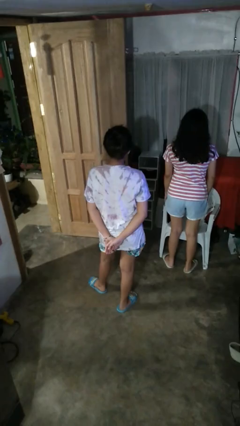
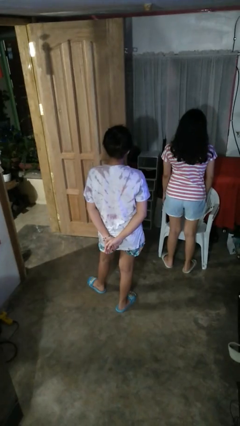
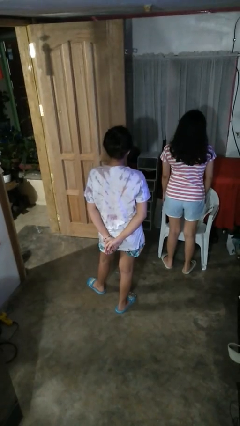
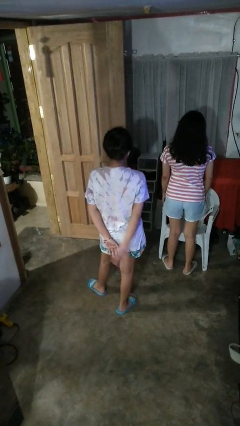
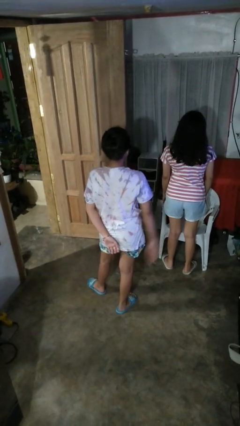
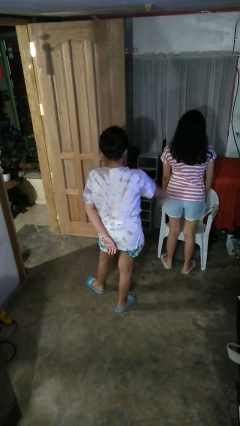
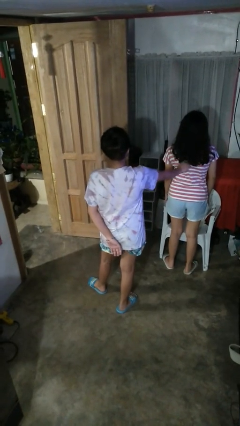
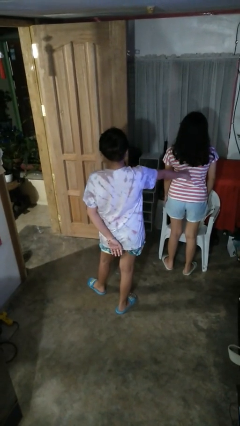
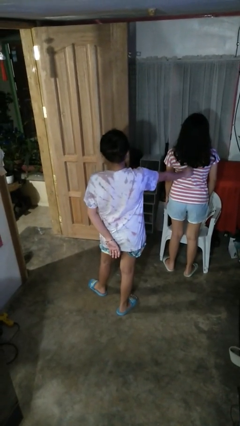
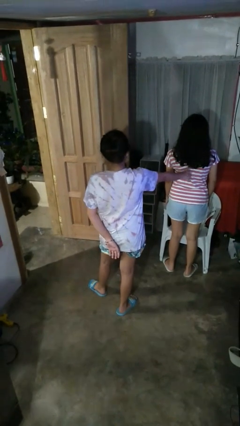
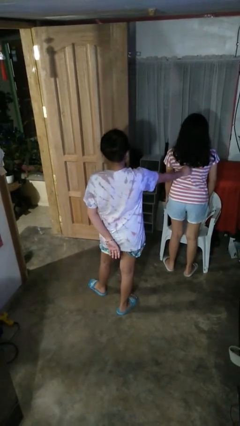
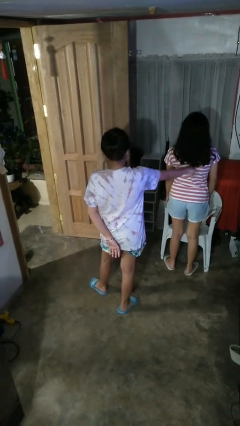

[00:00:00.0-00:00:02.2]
person touches back of person

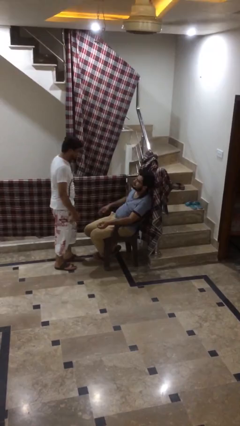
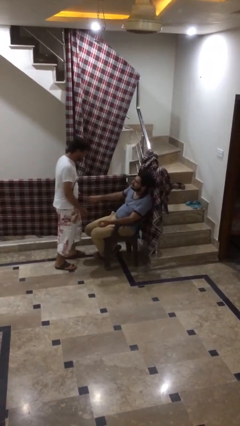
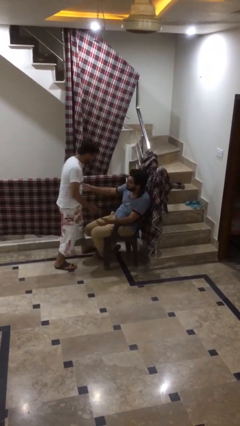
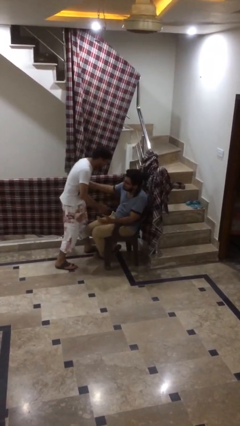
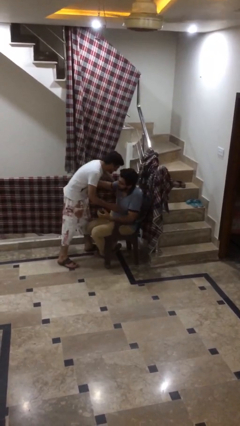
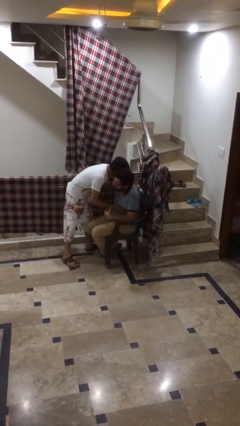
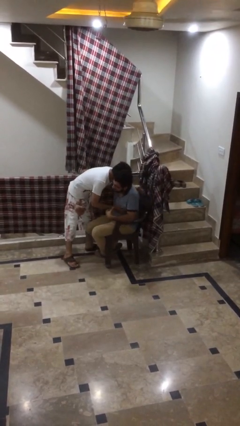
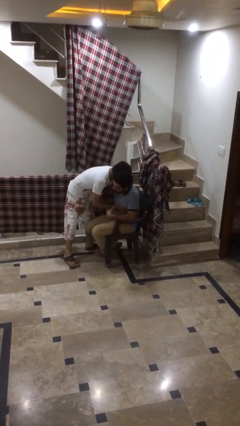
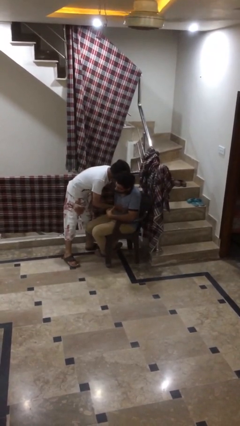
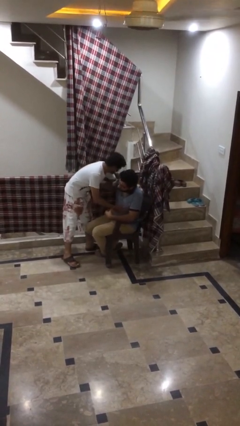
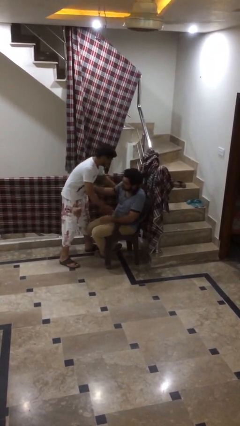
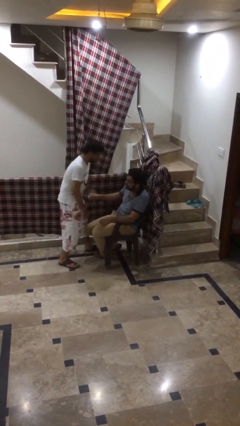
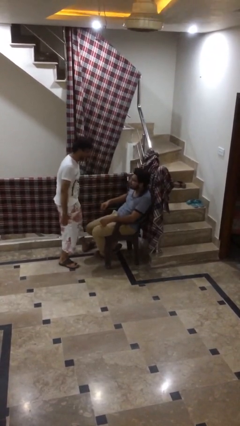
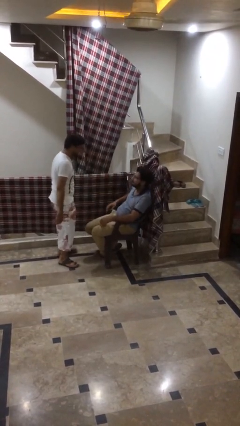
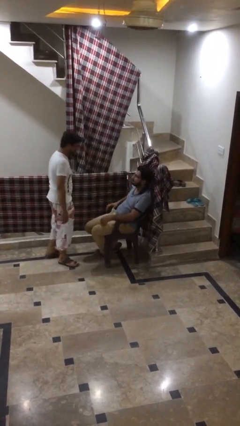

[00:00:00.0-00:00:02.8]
person embraces person

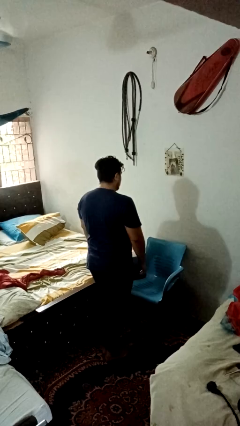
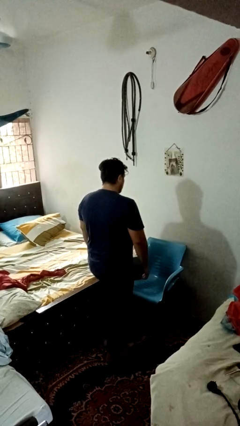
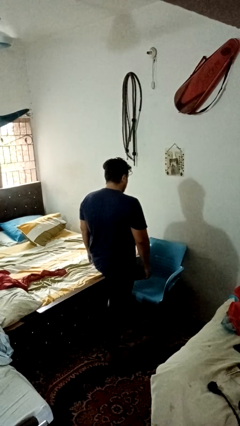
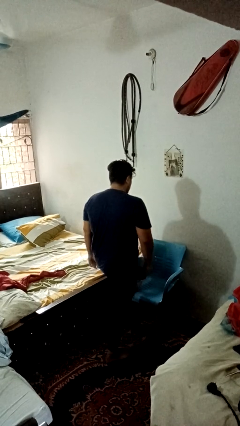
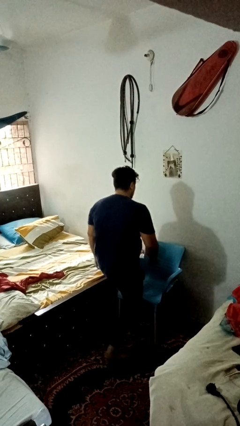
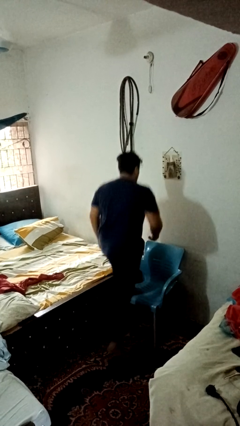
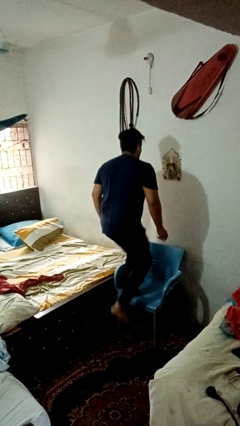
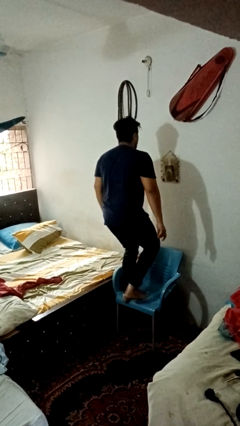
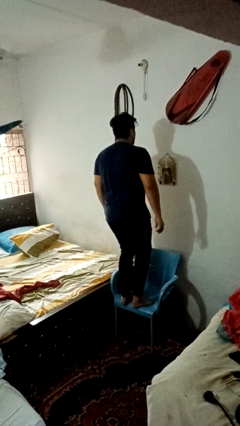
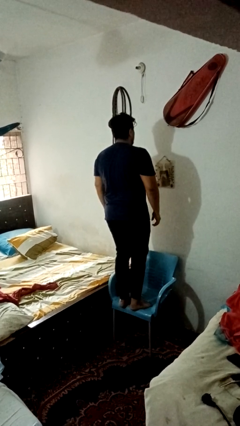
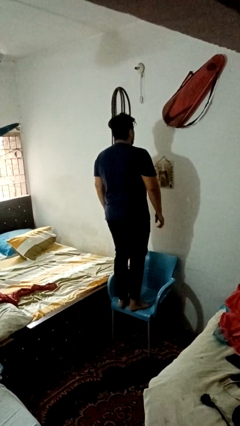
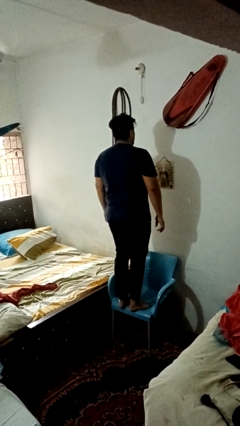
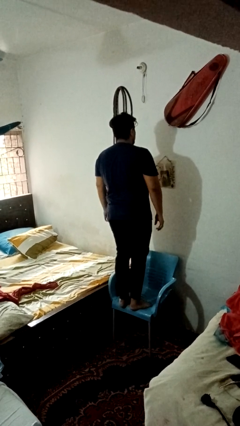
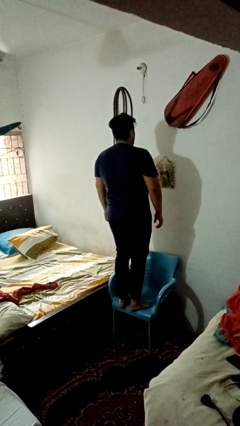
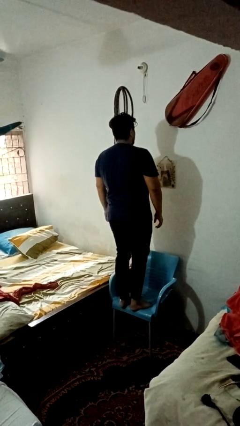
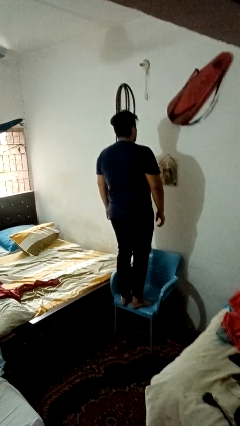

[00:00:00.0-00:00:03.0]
person climbs on chair

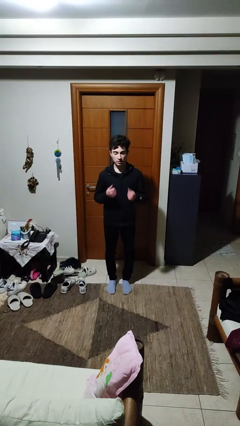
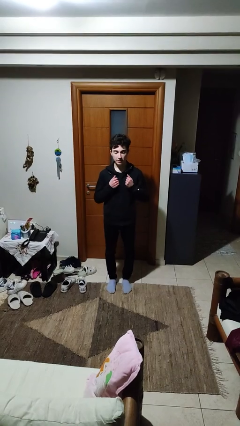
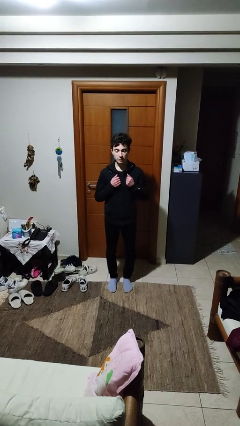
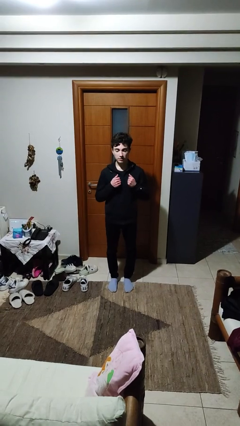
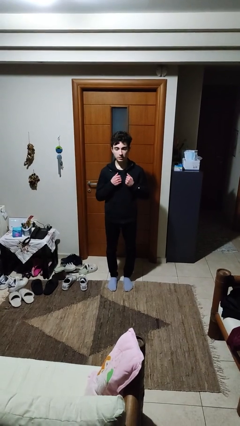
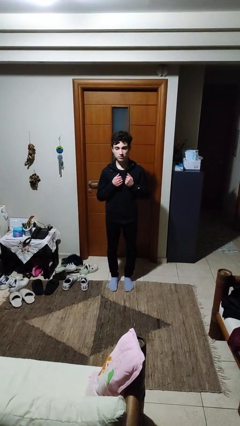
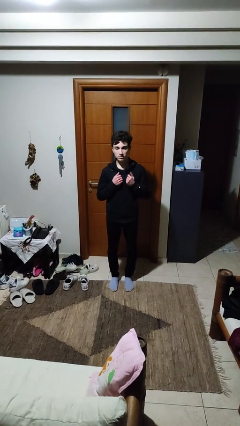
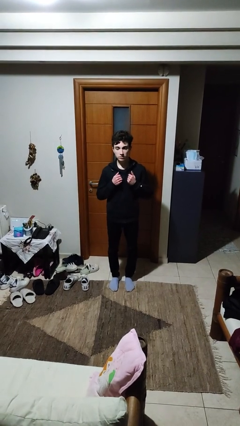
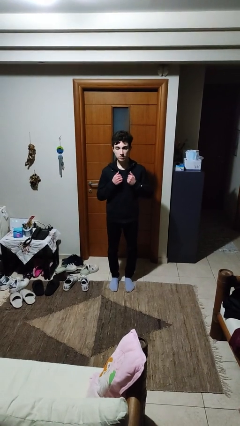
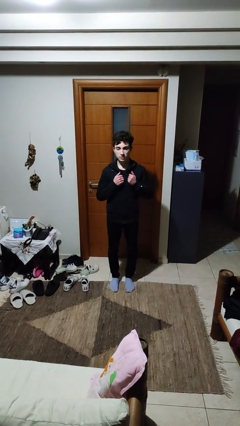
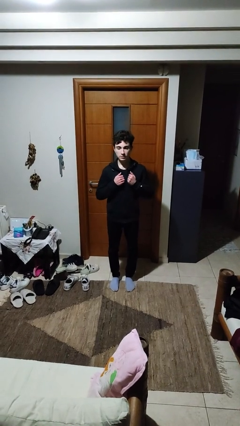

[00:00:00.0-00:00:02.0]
person drums on chest

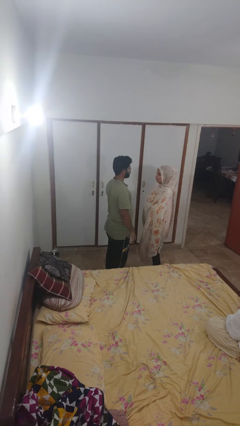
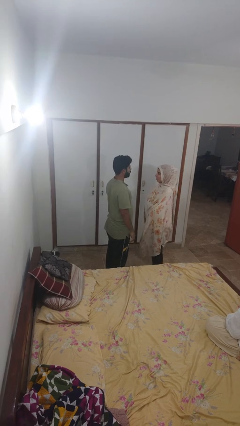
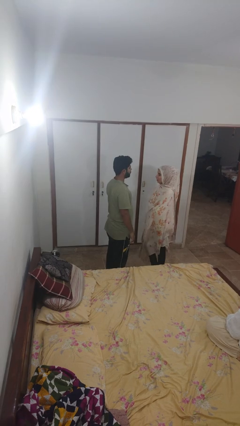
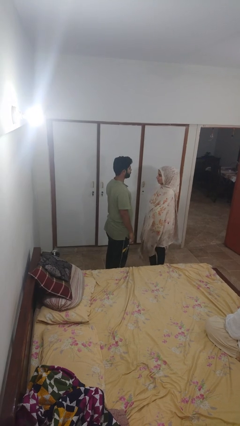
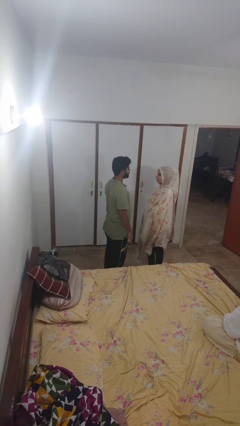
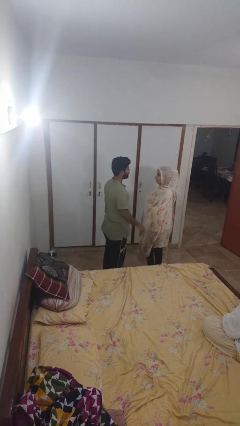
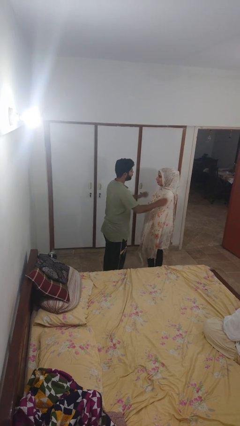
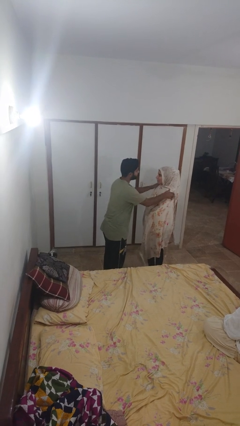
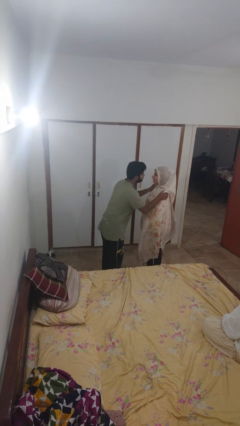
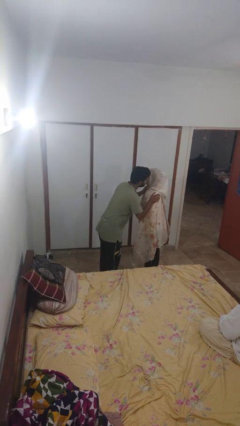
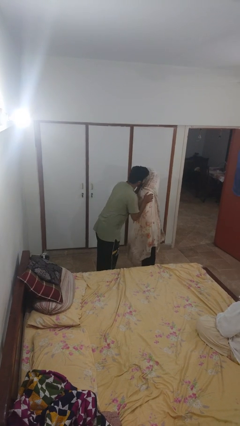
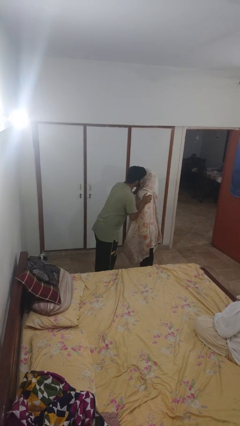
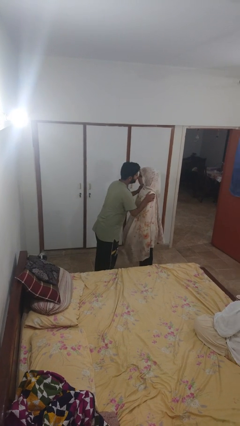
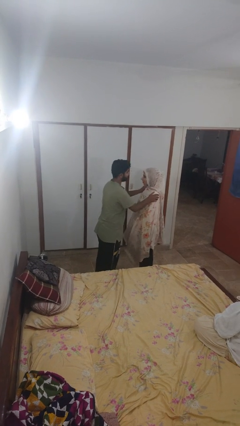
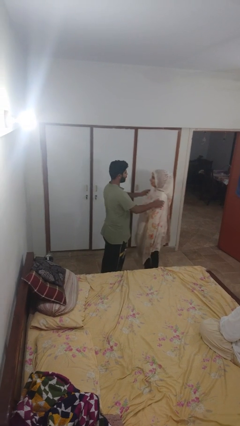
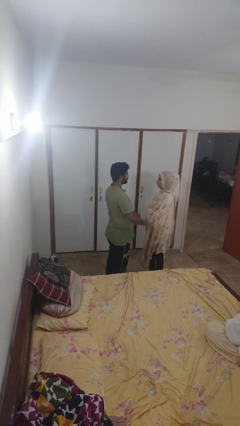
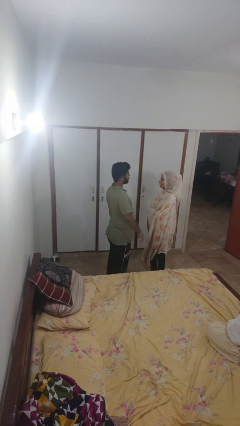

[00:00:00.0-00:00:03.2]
person kisses cheek of person

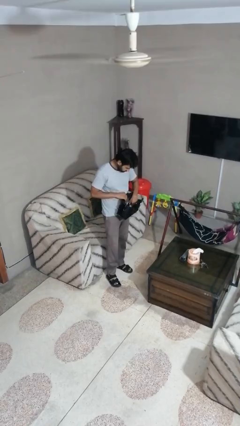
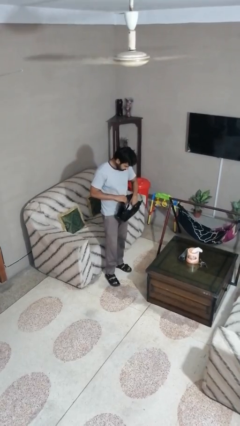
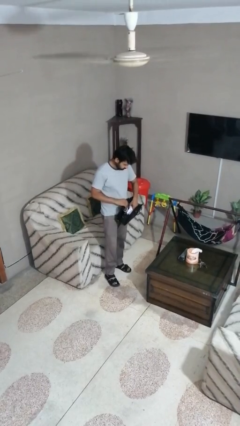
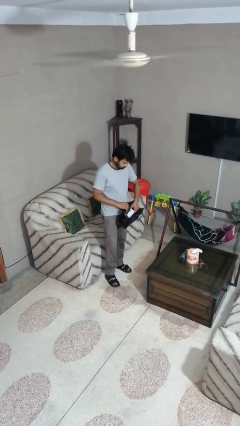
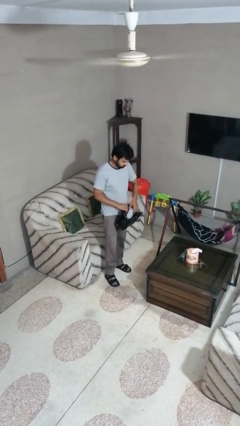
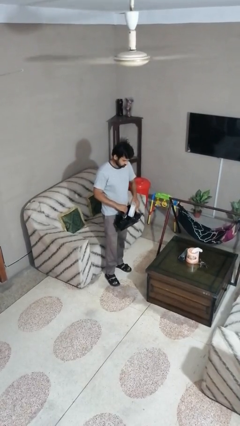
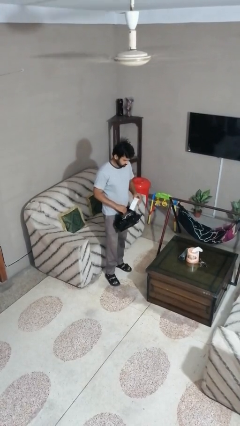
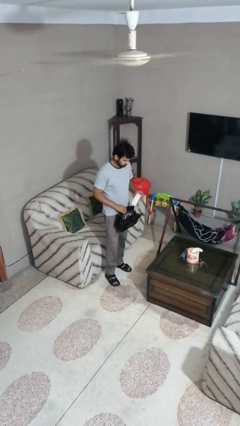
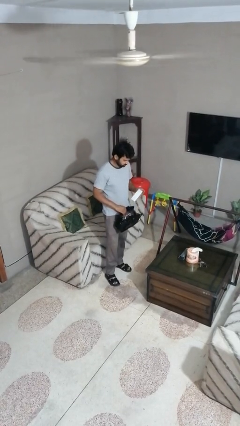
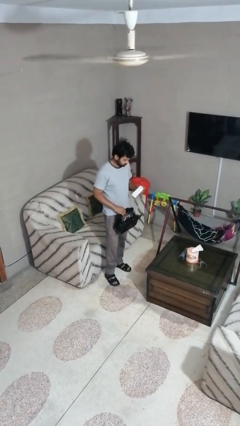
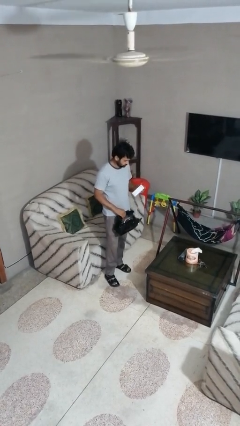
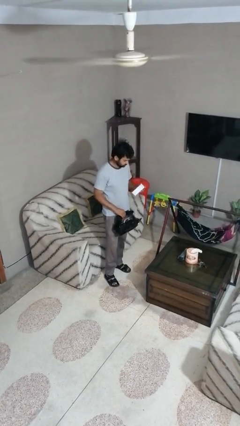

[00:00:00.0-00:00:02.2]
person takes object from purse

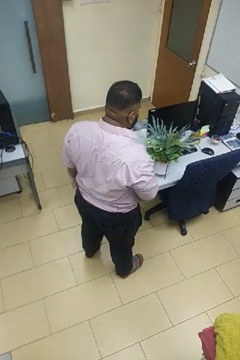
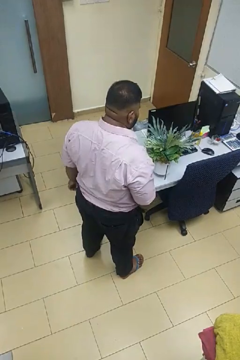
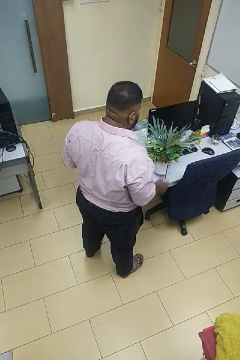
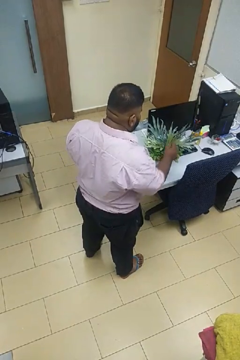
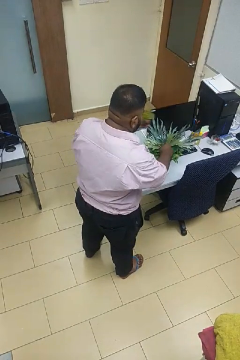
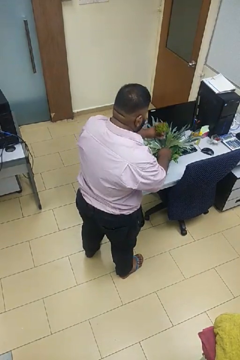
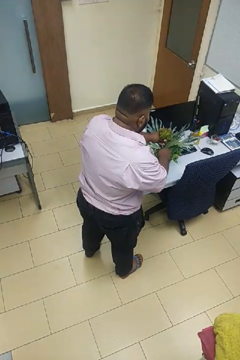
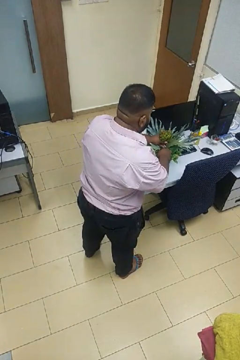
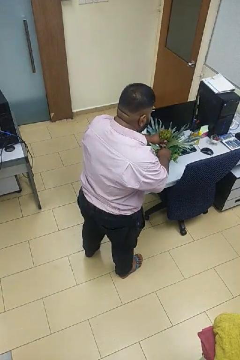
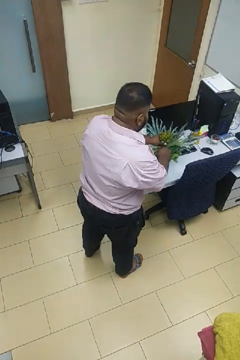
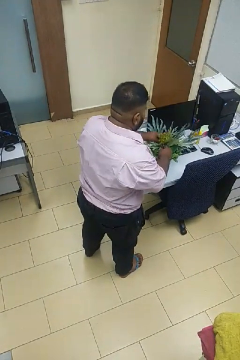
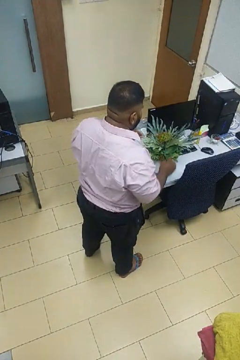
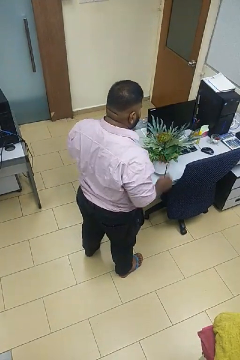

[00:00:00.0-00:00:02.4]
person arranges flowers in vase
